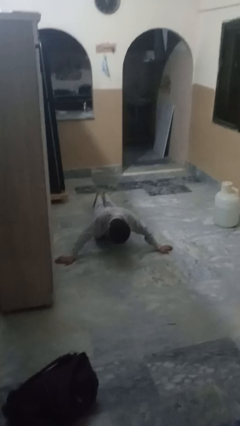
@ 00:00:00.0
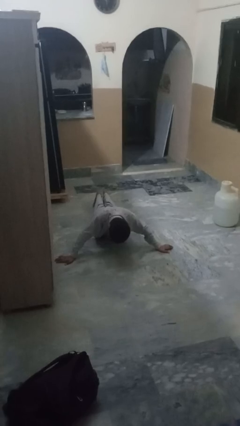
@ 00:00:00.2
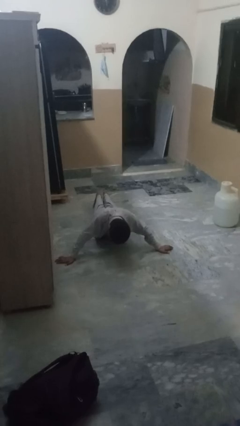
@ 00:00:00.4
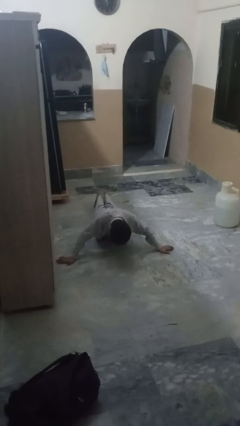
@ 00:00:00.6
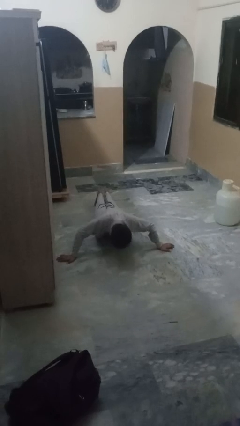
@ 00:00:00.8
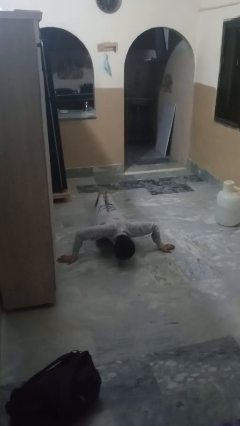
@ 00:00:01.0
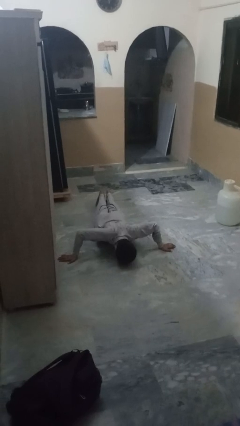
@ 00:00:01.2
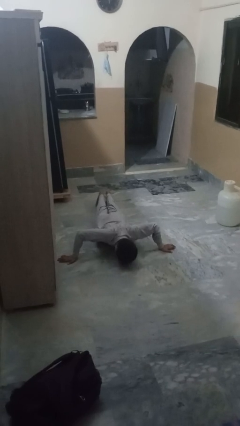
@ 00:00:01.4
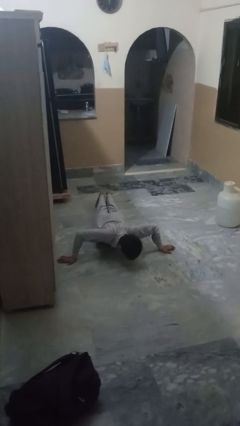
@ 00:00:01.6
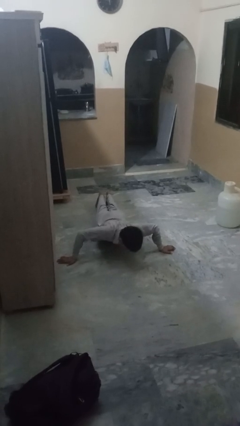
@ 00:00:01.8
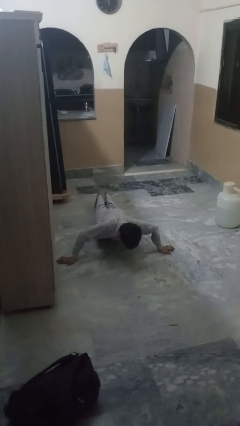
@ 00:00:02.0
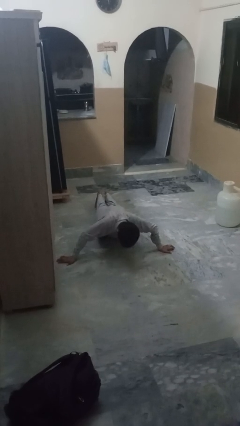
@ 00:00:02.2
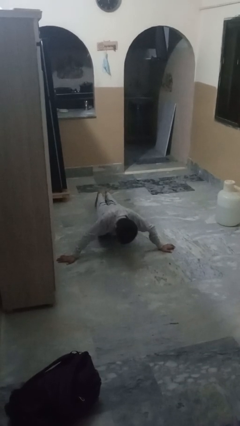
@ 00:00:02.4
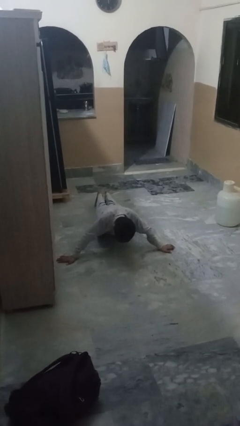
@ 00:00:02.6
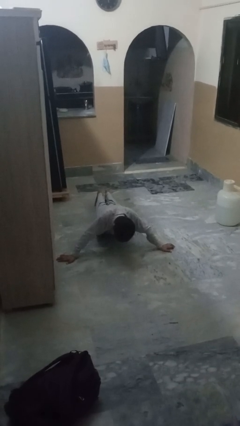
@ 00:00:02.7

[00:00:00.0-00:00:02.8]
person exercises with pushup

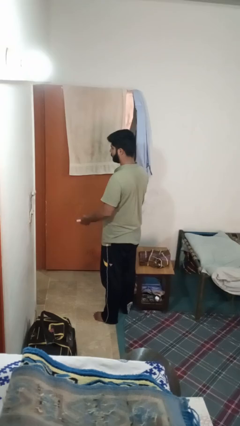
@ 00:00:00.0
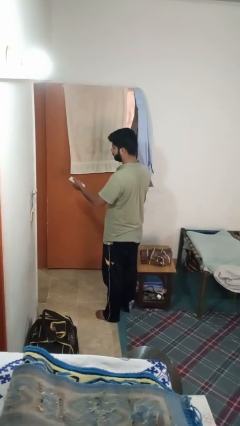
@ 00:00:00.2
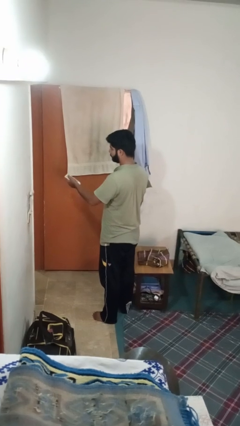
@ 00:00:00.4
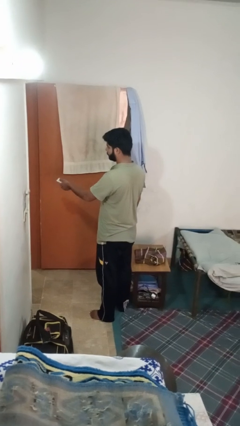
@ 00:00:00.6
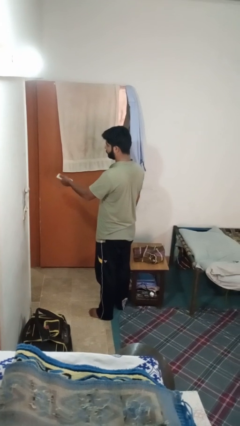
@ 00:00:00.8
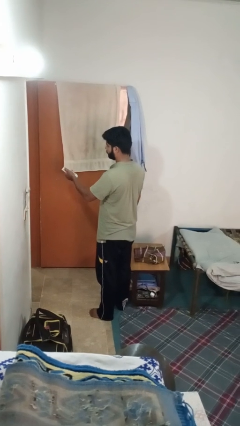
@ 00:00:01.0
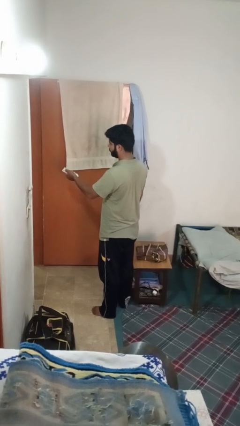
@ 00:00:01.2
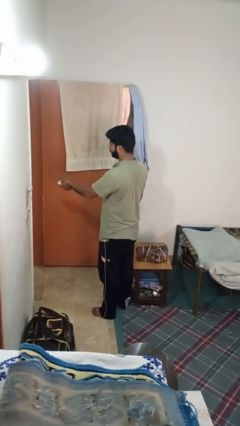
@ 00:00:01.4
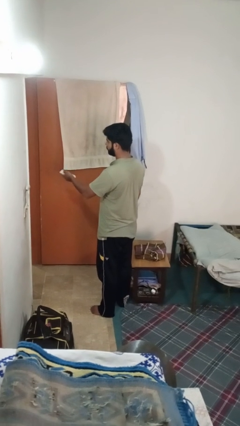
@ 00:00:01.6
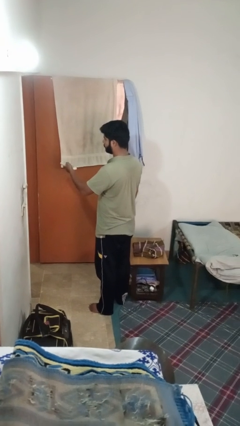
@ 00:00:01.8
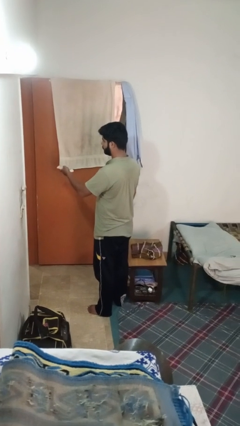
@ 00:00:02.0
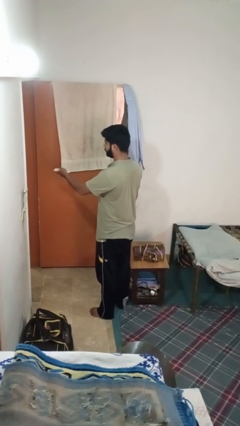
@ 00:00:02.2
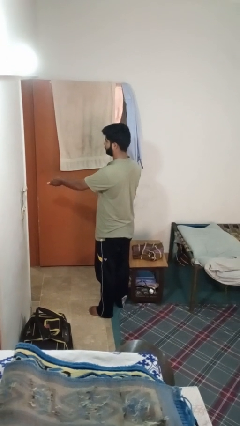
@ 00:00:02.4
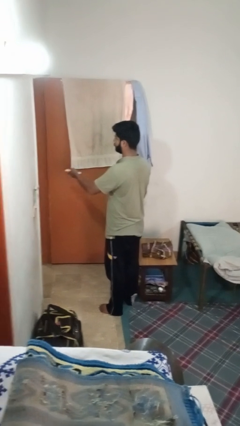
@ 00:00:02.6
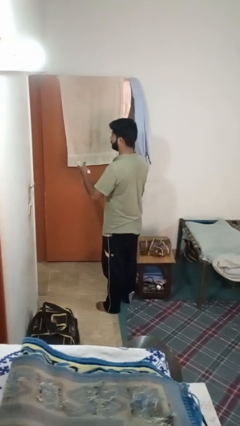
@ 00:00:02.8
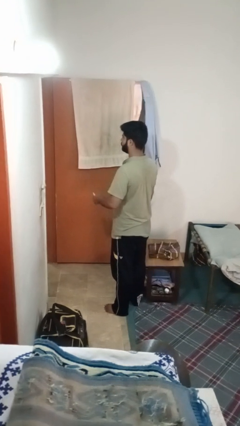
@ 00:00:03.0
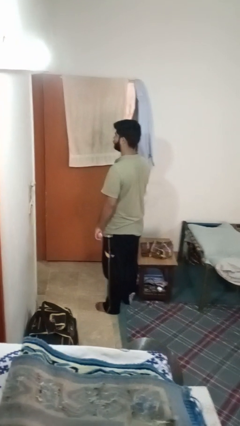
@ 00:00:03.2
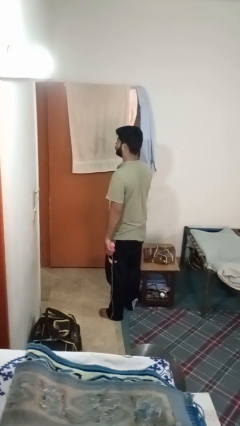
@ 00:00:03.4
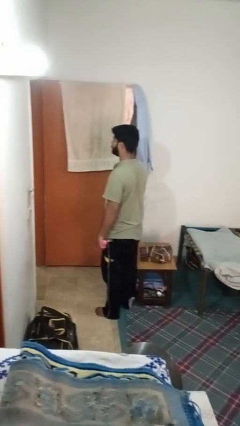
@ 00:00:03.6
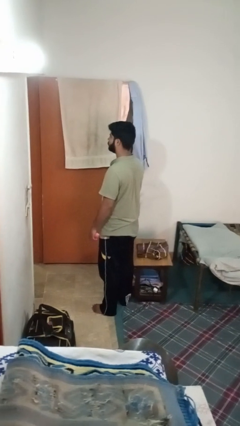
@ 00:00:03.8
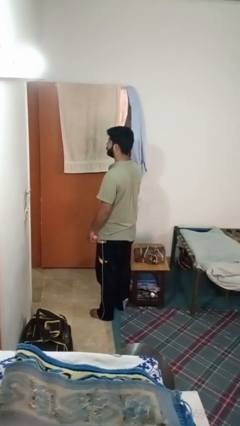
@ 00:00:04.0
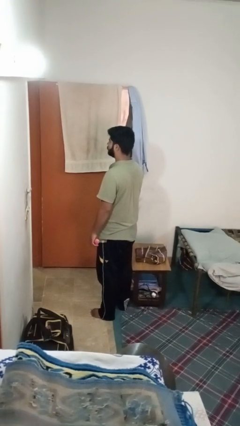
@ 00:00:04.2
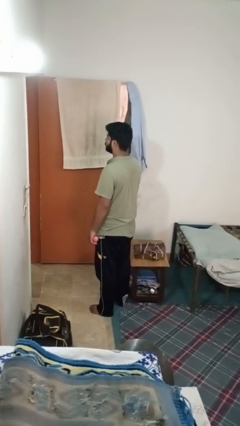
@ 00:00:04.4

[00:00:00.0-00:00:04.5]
person uses television remote

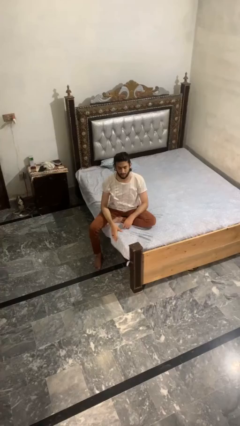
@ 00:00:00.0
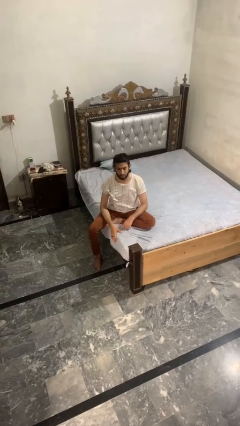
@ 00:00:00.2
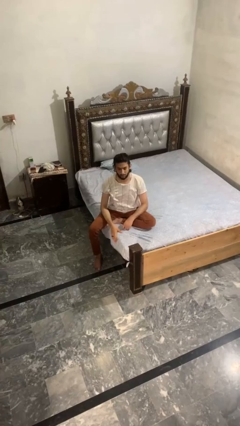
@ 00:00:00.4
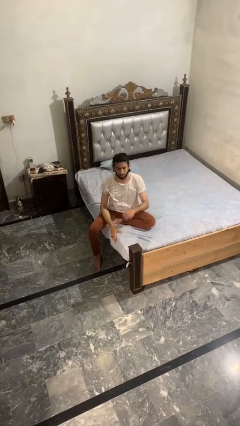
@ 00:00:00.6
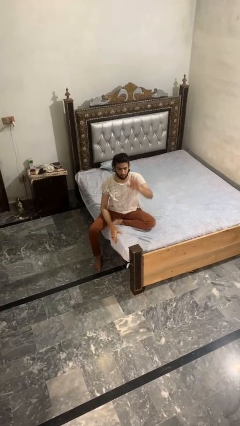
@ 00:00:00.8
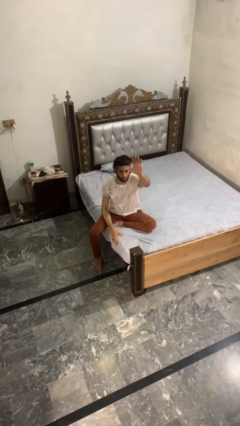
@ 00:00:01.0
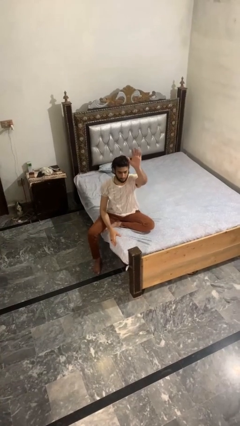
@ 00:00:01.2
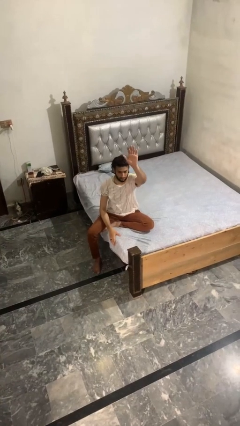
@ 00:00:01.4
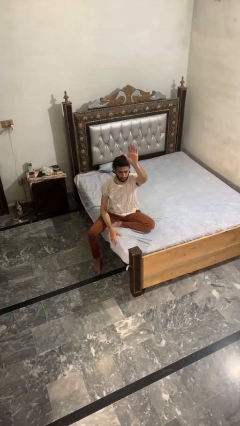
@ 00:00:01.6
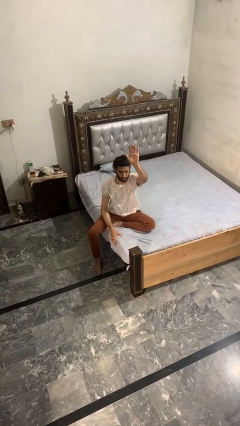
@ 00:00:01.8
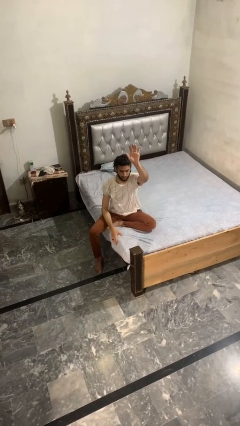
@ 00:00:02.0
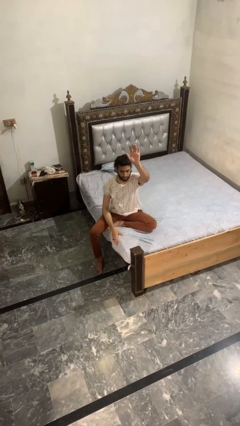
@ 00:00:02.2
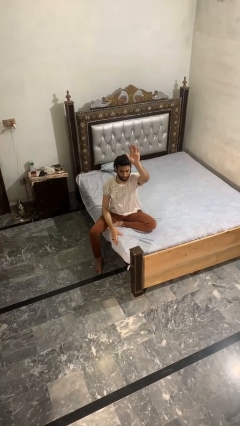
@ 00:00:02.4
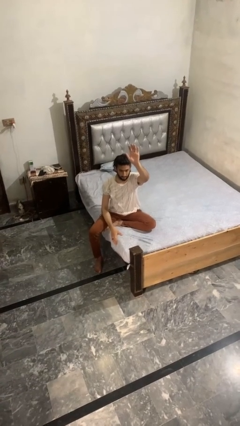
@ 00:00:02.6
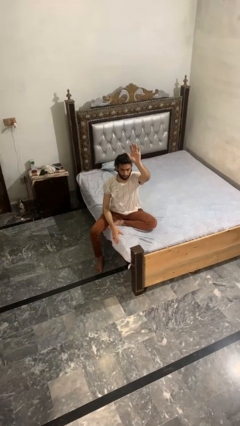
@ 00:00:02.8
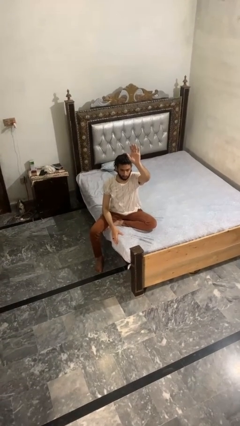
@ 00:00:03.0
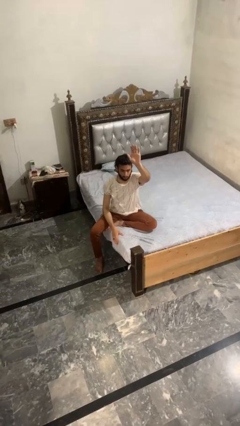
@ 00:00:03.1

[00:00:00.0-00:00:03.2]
person gestures raise hand

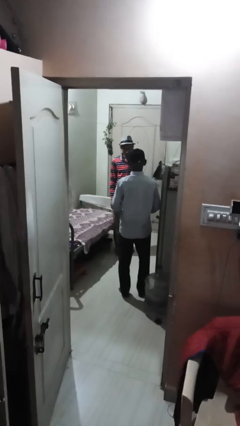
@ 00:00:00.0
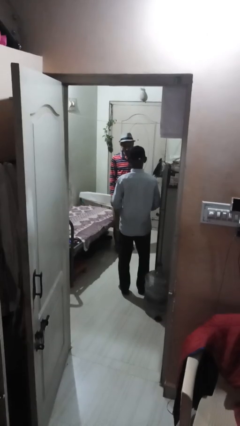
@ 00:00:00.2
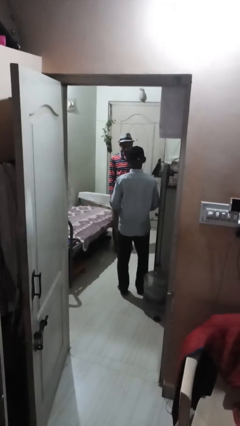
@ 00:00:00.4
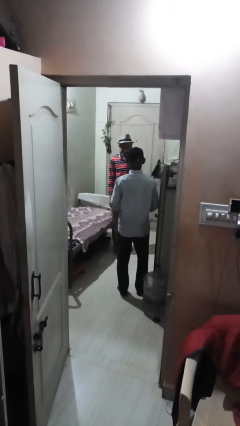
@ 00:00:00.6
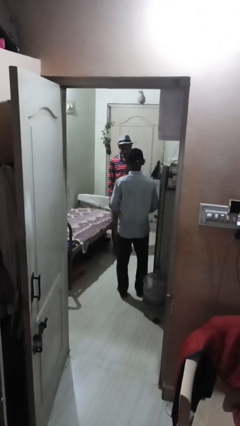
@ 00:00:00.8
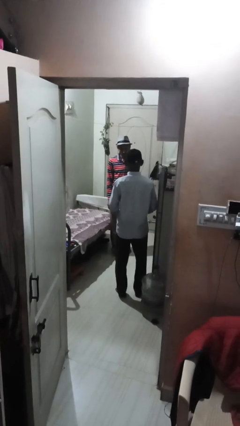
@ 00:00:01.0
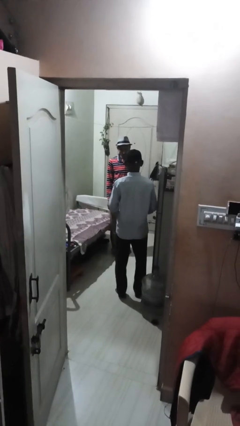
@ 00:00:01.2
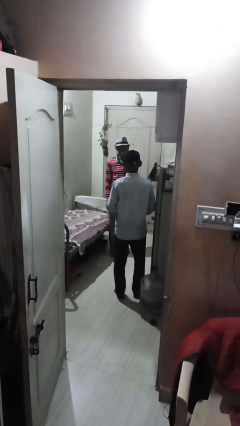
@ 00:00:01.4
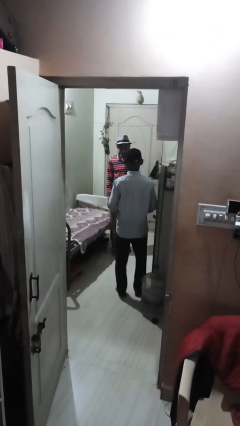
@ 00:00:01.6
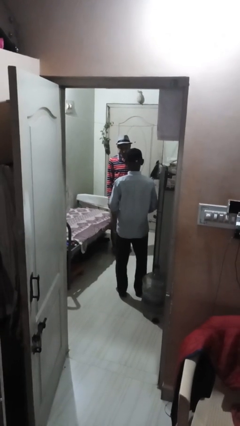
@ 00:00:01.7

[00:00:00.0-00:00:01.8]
person throws object to person

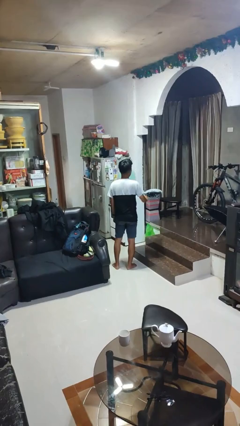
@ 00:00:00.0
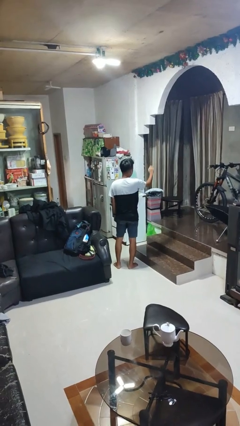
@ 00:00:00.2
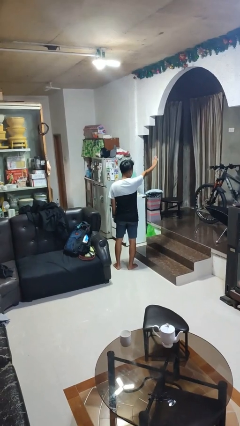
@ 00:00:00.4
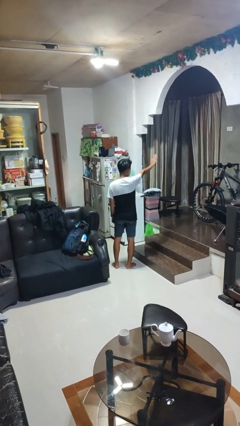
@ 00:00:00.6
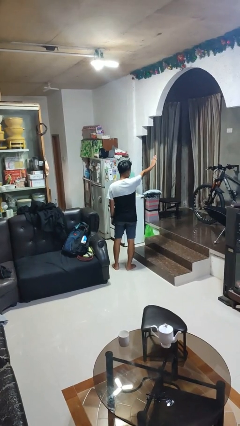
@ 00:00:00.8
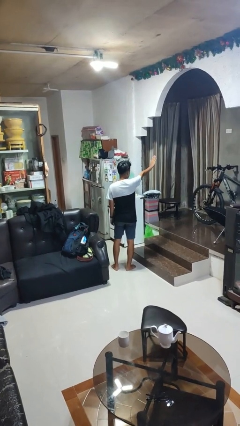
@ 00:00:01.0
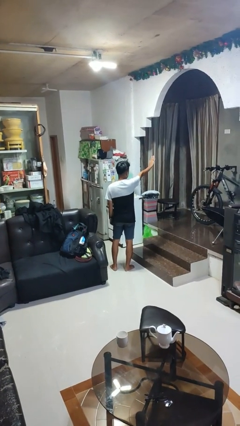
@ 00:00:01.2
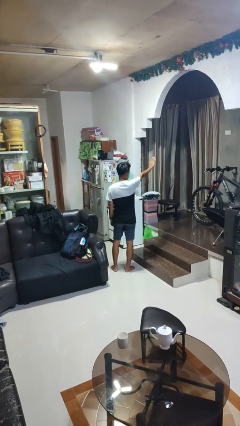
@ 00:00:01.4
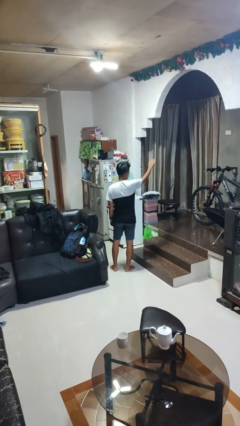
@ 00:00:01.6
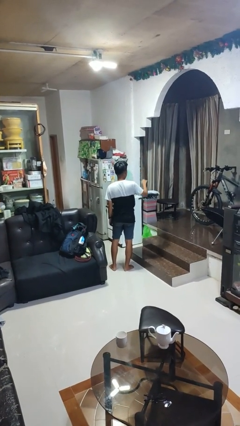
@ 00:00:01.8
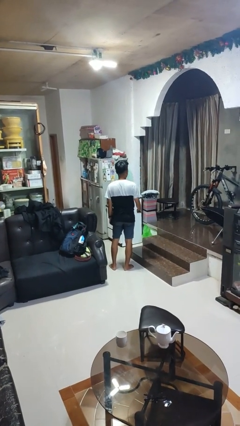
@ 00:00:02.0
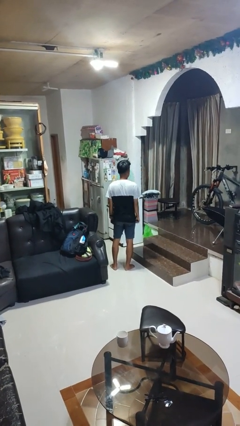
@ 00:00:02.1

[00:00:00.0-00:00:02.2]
person gestures stop

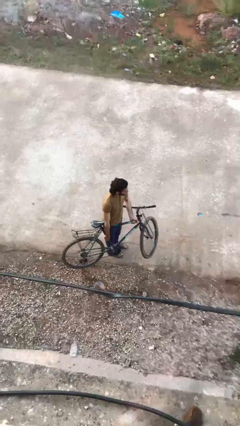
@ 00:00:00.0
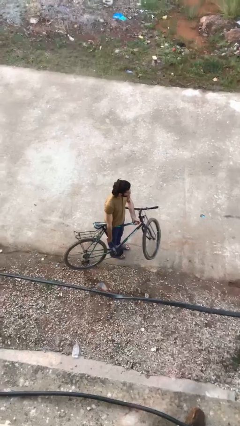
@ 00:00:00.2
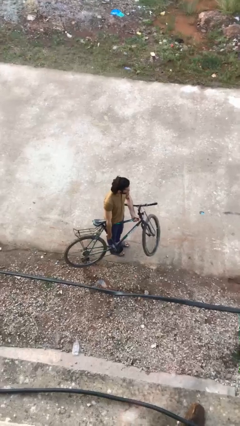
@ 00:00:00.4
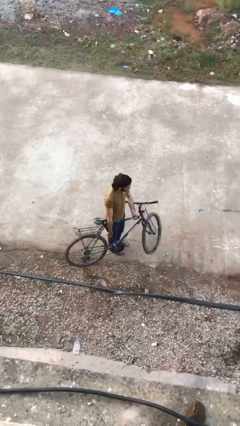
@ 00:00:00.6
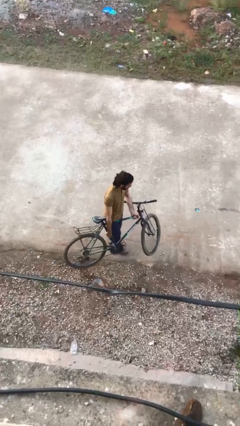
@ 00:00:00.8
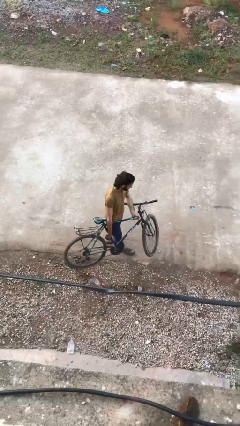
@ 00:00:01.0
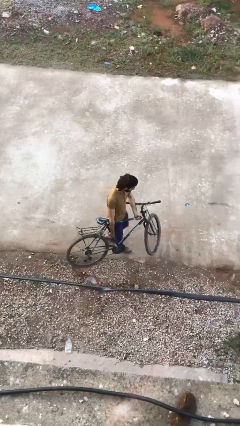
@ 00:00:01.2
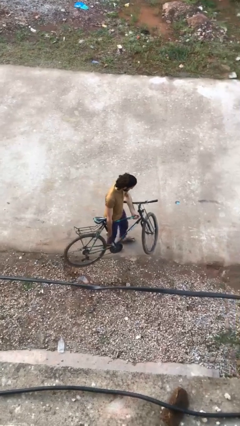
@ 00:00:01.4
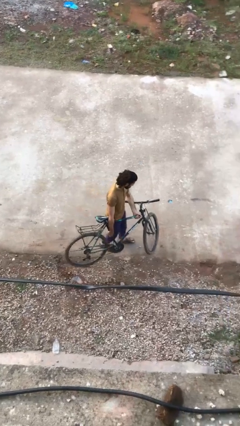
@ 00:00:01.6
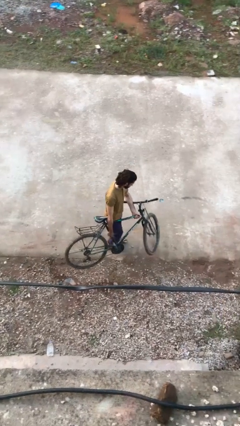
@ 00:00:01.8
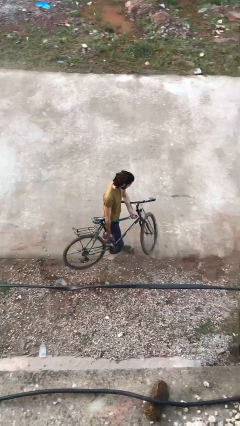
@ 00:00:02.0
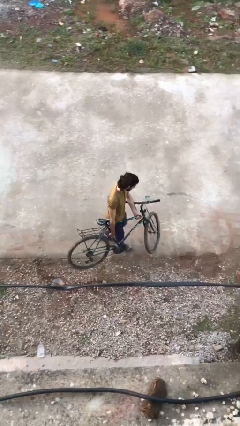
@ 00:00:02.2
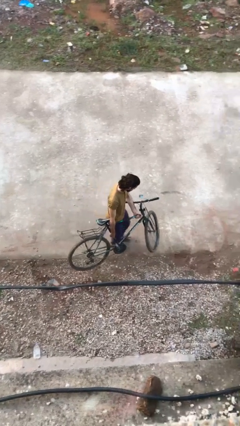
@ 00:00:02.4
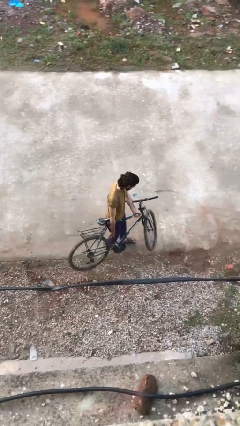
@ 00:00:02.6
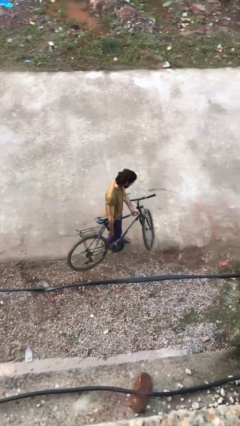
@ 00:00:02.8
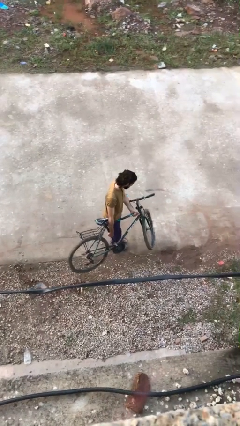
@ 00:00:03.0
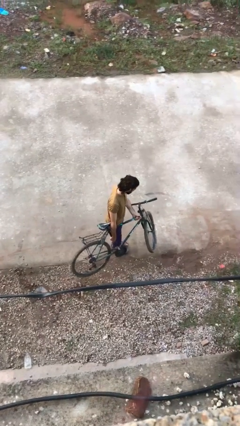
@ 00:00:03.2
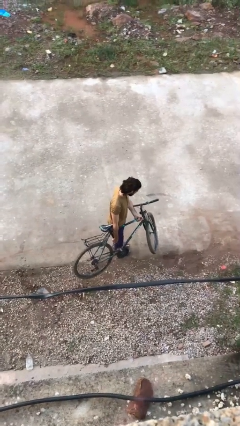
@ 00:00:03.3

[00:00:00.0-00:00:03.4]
person carries bicycle
